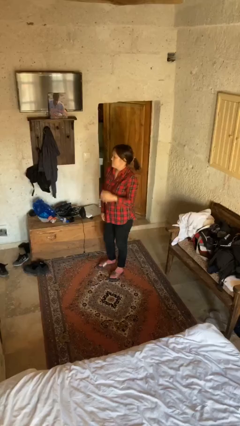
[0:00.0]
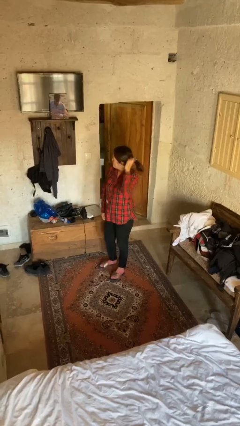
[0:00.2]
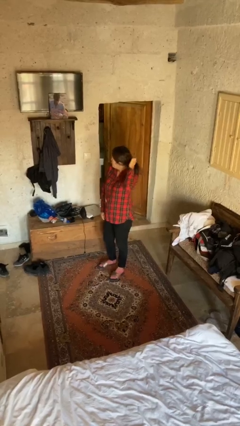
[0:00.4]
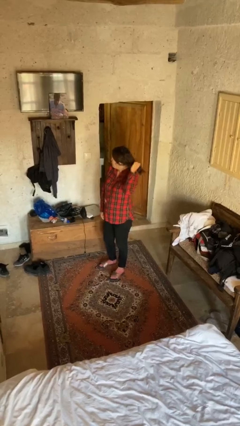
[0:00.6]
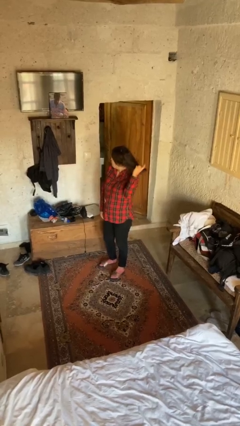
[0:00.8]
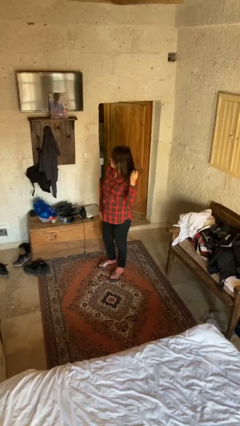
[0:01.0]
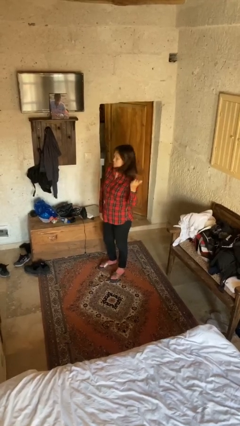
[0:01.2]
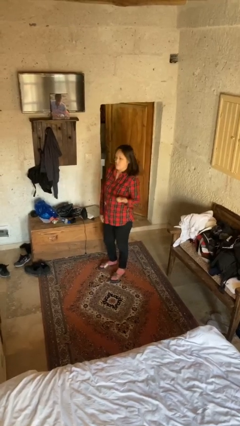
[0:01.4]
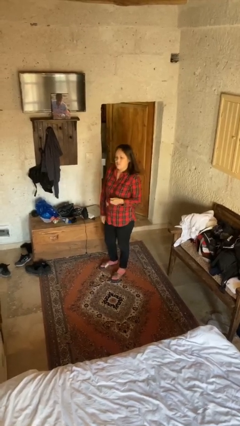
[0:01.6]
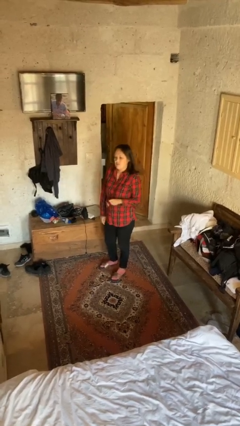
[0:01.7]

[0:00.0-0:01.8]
person takes off hairtie

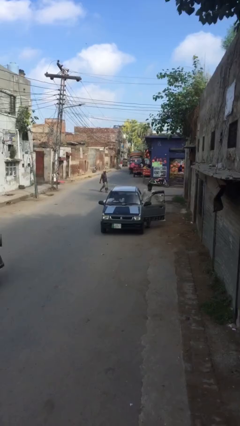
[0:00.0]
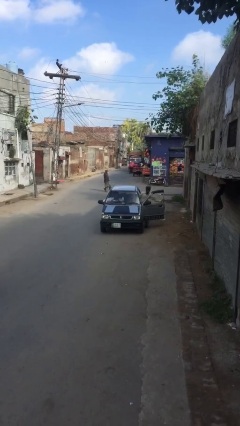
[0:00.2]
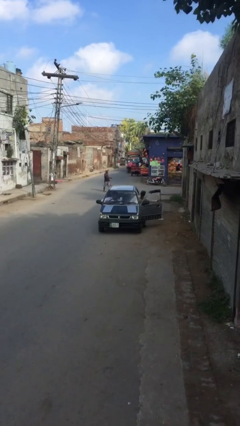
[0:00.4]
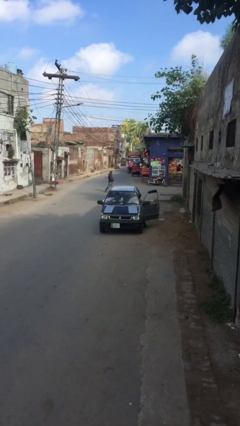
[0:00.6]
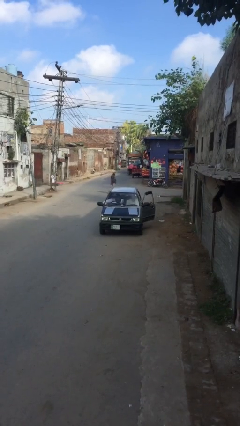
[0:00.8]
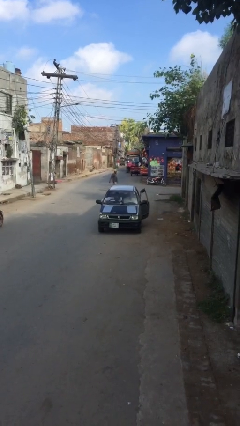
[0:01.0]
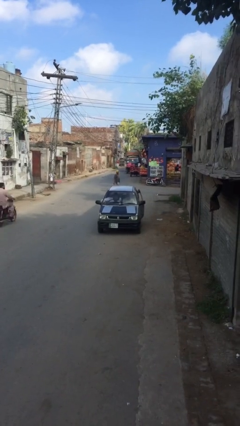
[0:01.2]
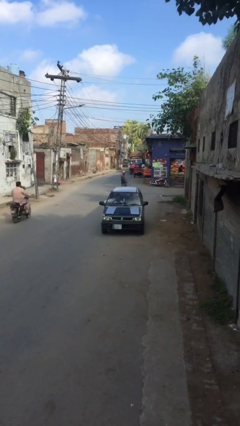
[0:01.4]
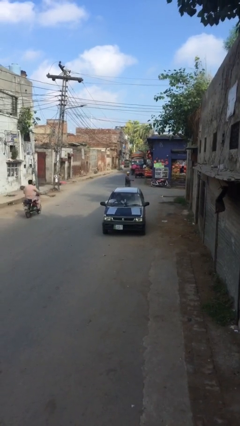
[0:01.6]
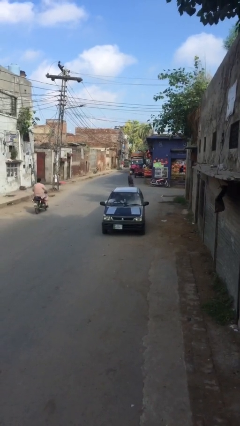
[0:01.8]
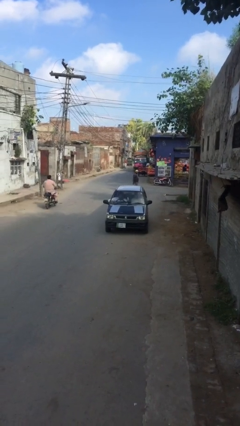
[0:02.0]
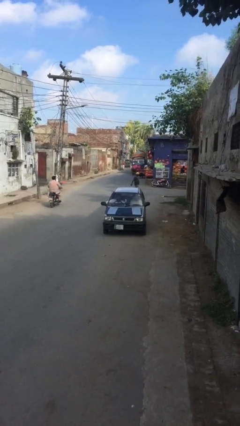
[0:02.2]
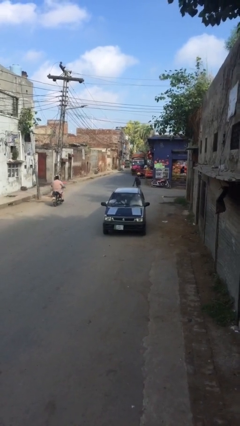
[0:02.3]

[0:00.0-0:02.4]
car picks up person

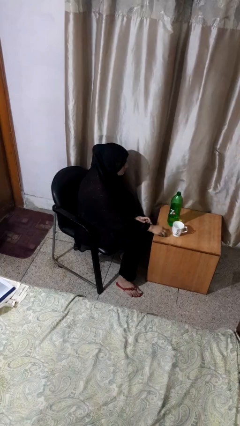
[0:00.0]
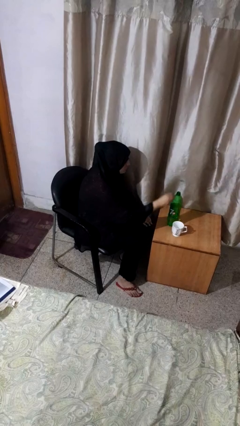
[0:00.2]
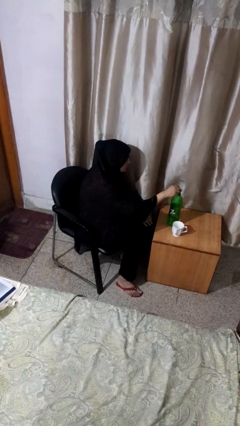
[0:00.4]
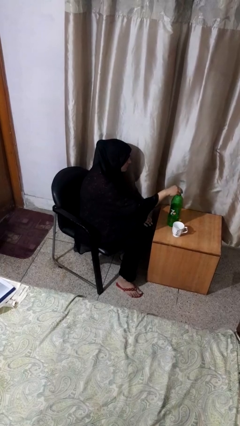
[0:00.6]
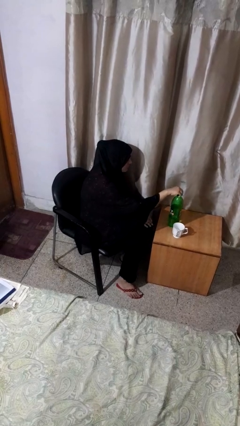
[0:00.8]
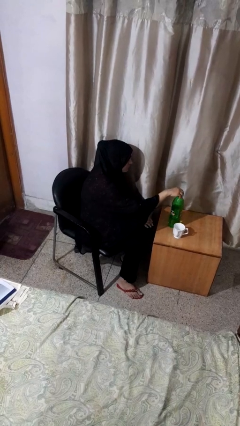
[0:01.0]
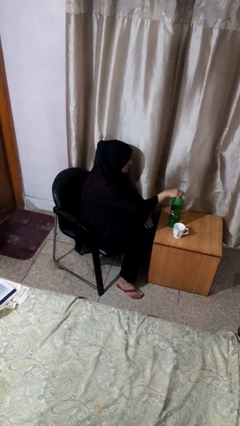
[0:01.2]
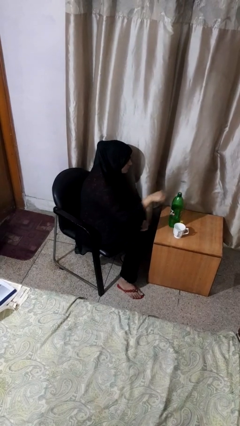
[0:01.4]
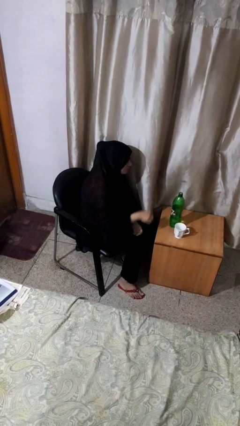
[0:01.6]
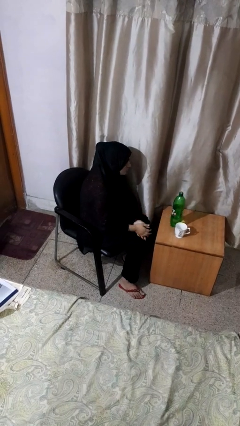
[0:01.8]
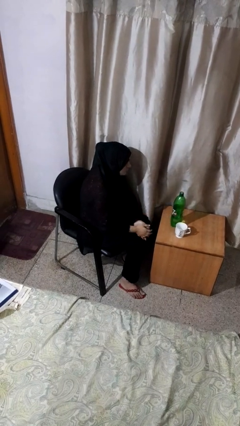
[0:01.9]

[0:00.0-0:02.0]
person screws lid to bottle

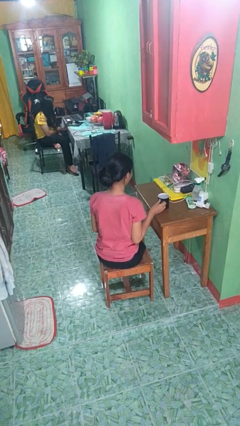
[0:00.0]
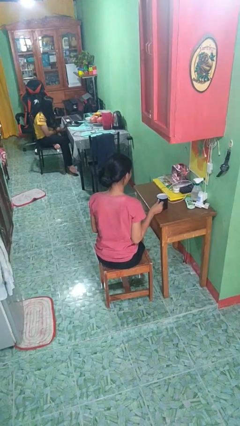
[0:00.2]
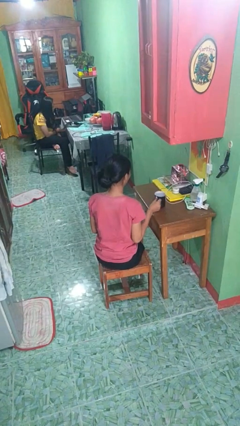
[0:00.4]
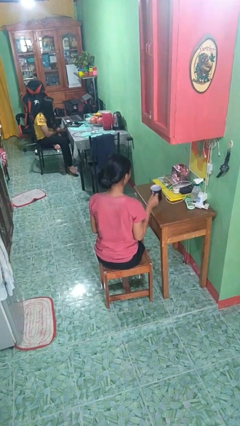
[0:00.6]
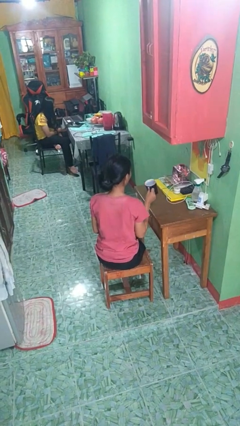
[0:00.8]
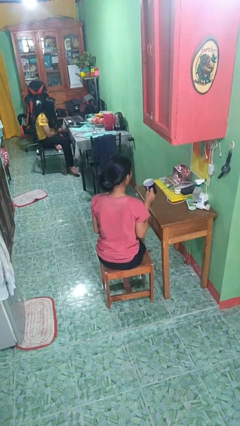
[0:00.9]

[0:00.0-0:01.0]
person picks up object from table

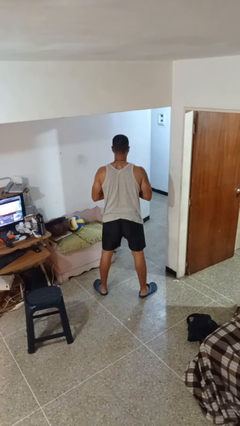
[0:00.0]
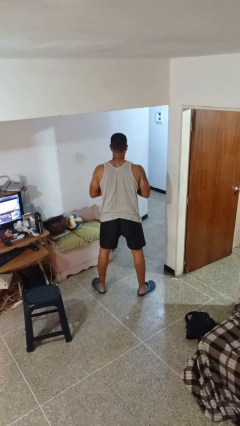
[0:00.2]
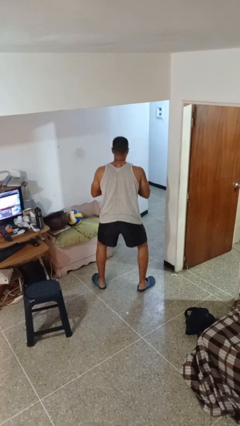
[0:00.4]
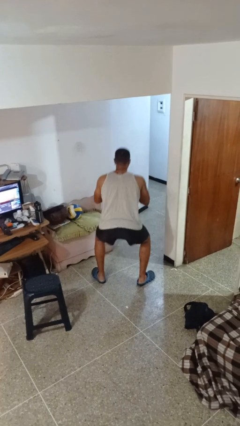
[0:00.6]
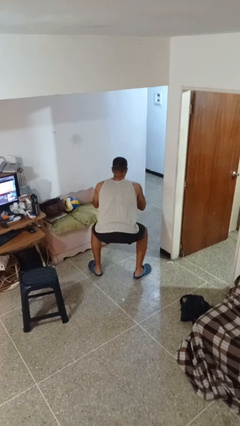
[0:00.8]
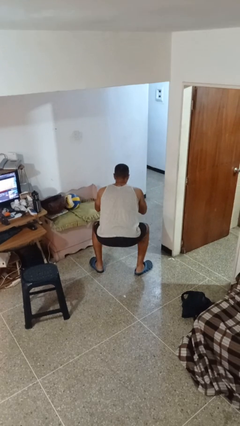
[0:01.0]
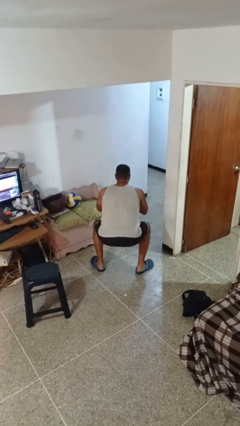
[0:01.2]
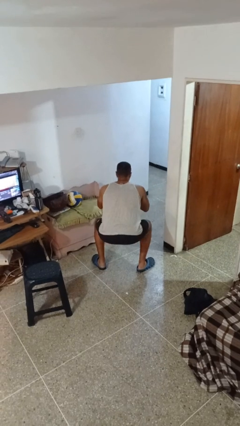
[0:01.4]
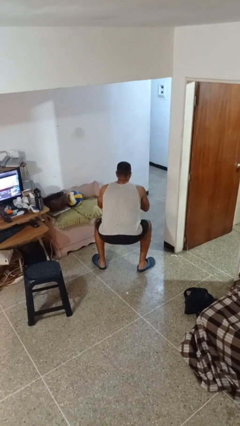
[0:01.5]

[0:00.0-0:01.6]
person squats

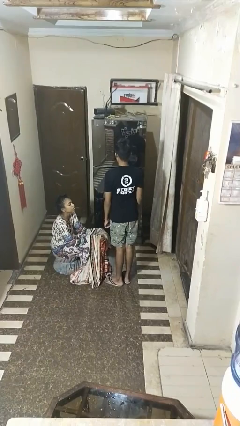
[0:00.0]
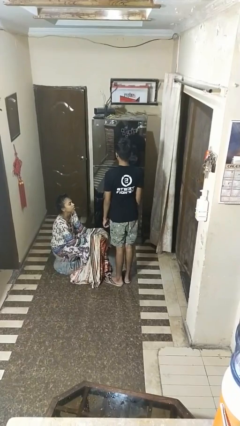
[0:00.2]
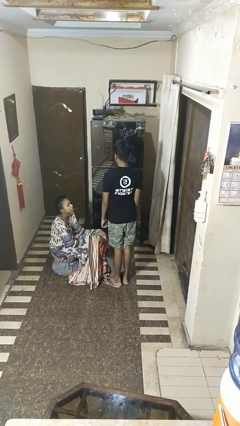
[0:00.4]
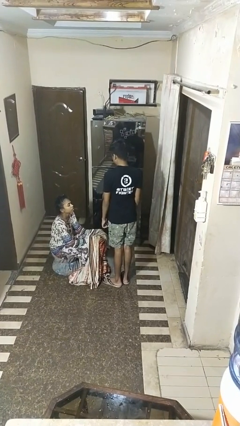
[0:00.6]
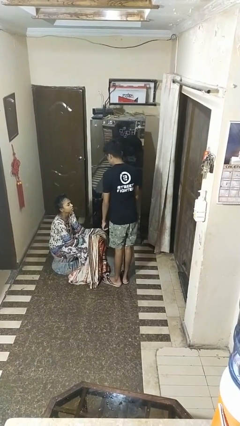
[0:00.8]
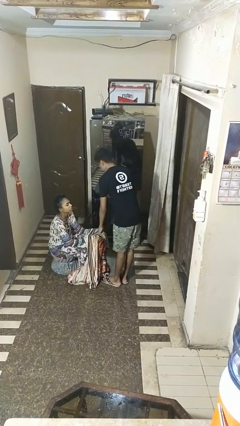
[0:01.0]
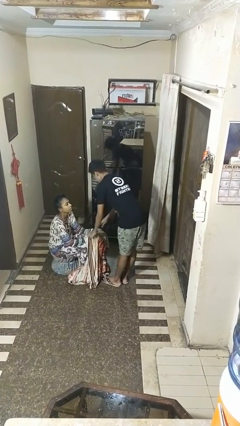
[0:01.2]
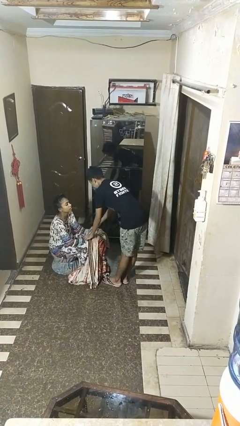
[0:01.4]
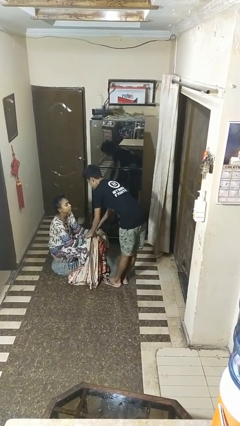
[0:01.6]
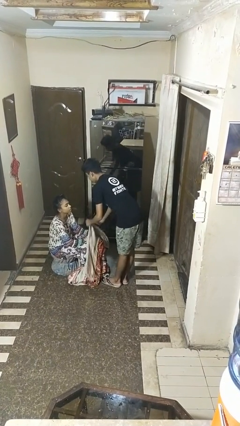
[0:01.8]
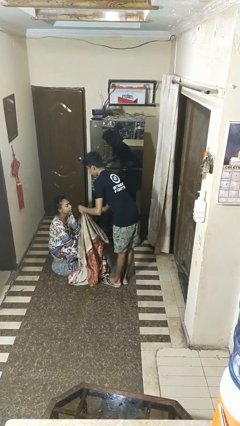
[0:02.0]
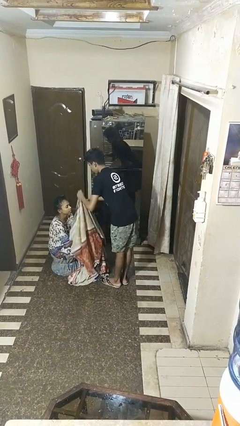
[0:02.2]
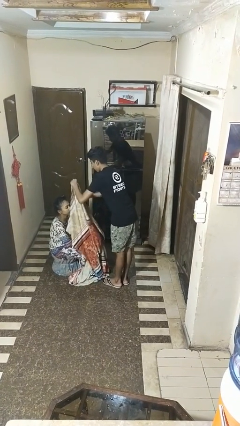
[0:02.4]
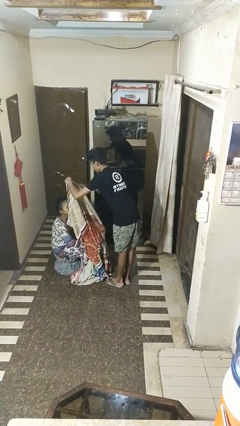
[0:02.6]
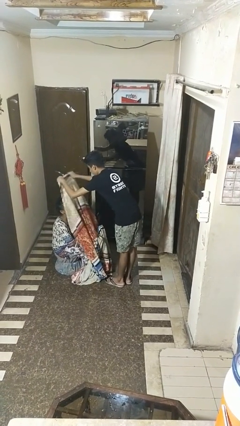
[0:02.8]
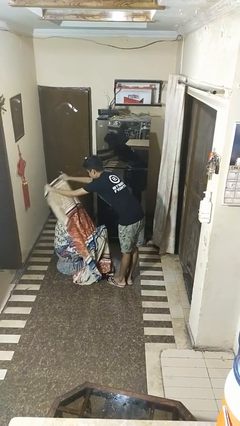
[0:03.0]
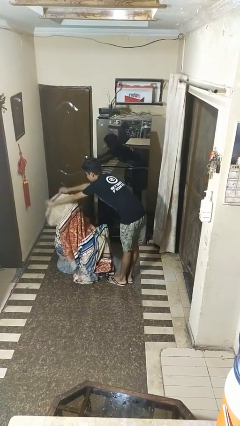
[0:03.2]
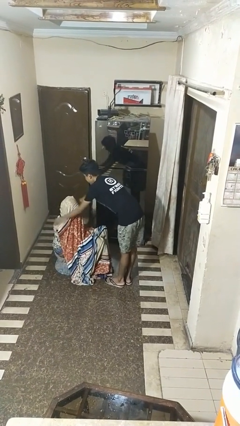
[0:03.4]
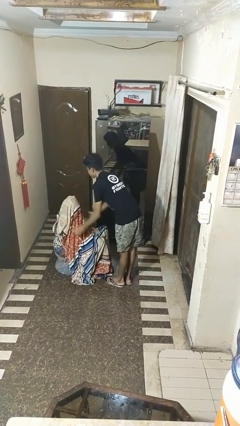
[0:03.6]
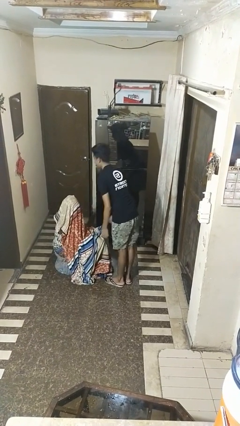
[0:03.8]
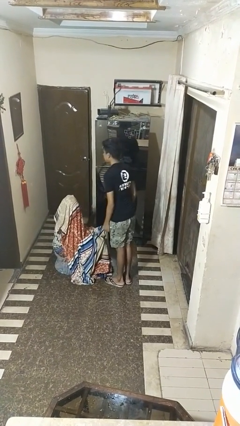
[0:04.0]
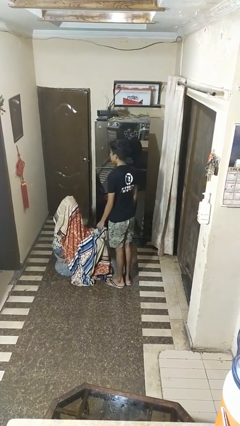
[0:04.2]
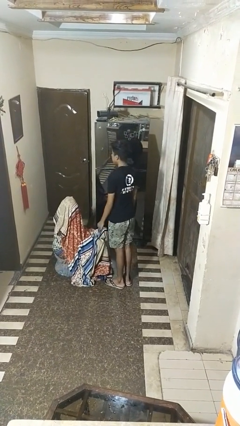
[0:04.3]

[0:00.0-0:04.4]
person covers friend with blanket

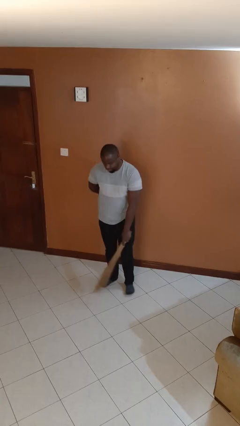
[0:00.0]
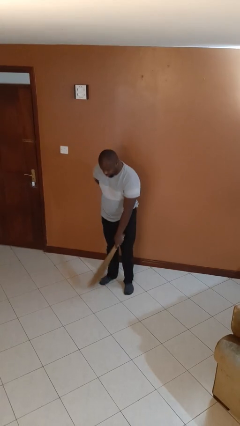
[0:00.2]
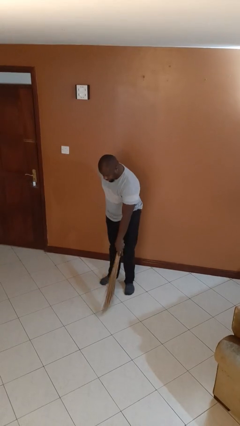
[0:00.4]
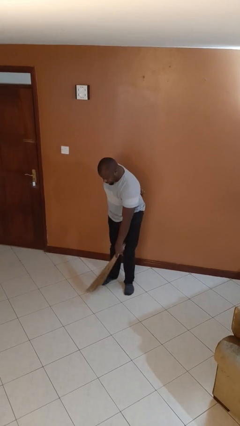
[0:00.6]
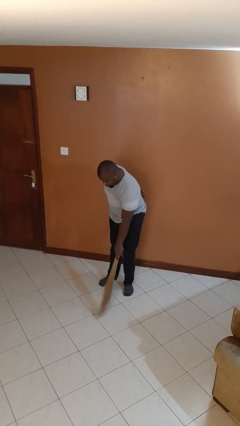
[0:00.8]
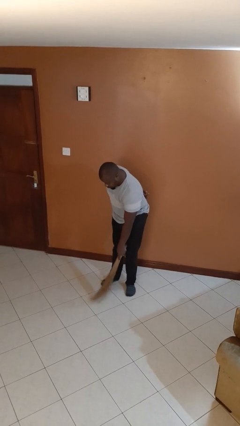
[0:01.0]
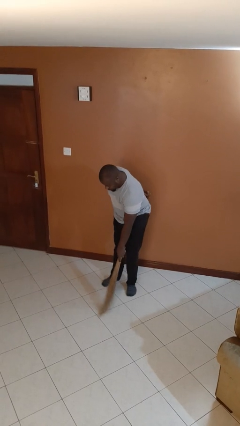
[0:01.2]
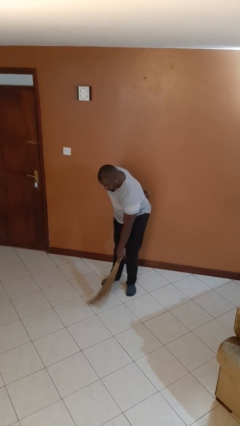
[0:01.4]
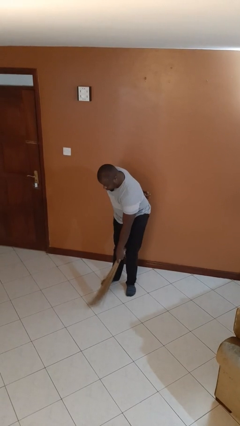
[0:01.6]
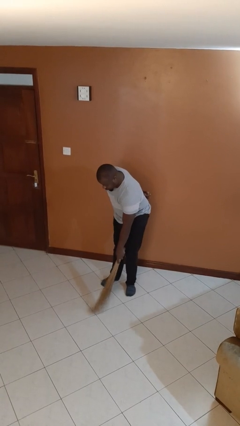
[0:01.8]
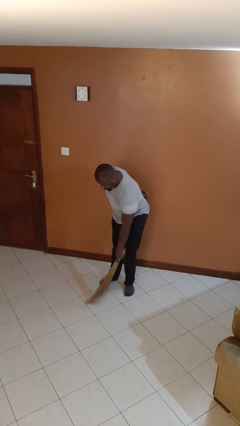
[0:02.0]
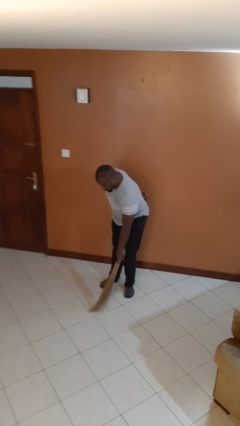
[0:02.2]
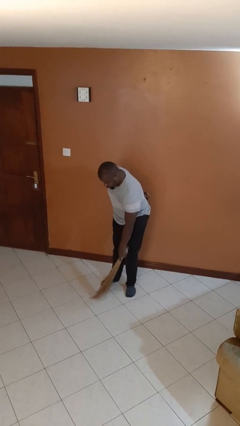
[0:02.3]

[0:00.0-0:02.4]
person sweeps floor

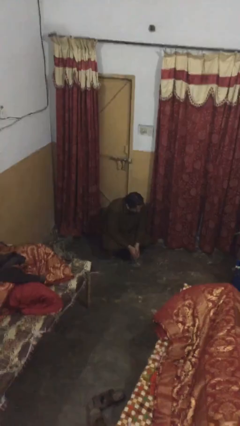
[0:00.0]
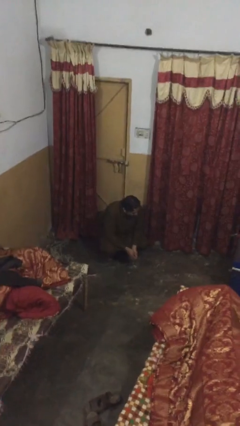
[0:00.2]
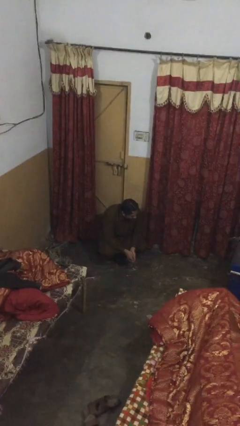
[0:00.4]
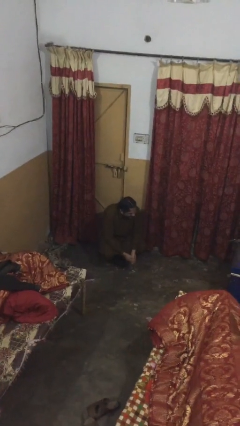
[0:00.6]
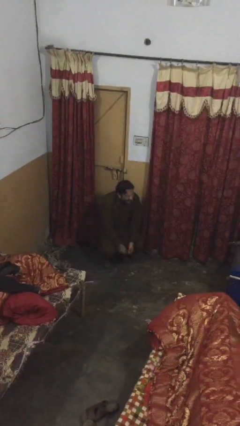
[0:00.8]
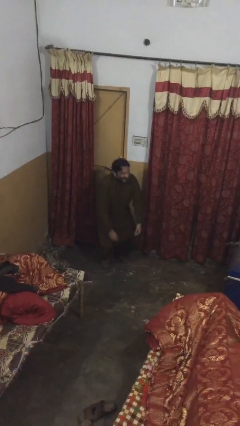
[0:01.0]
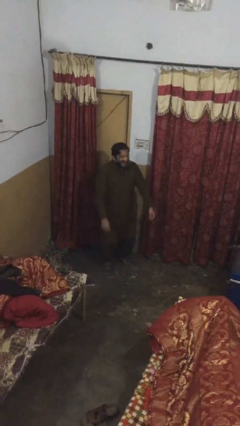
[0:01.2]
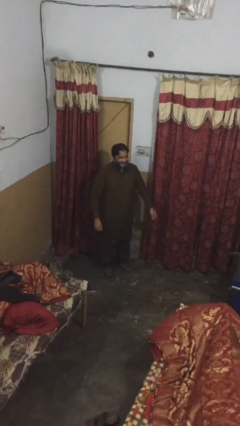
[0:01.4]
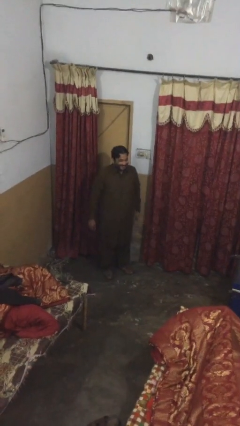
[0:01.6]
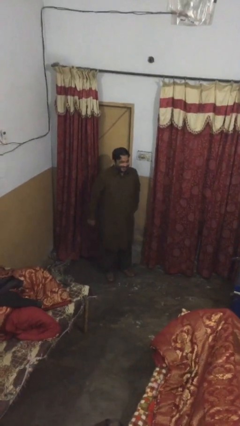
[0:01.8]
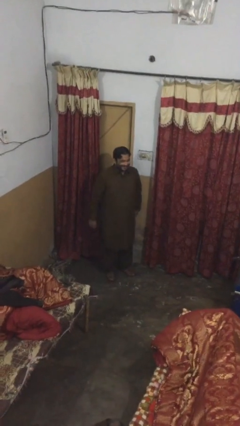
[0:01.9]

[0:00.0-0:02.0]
person stands up
